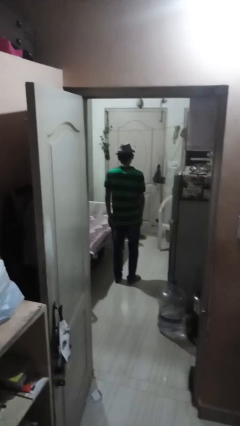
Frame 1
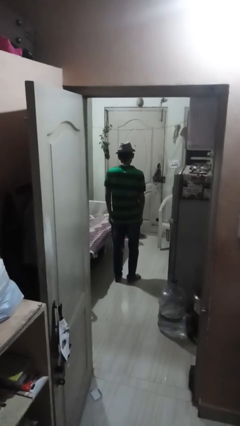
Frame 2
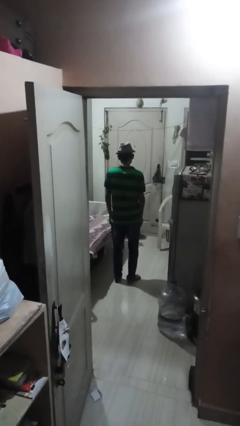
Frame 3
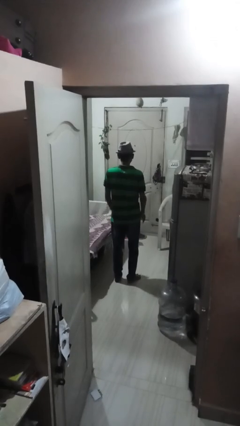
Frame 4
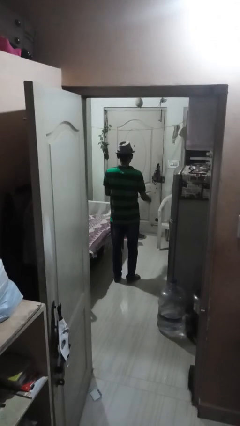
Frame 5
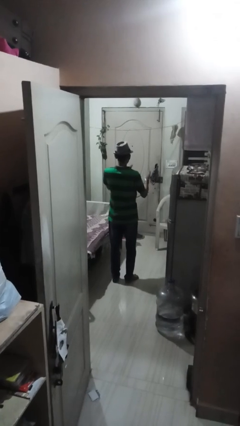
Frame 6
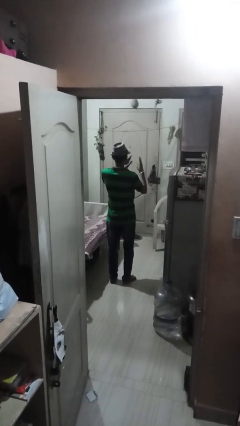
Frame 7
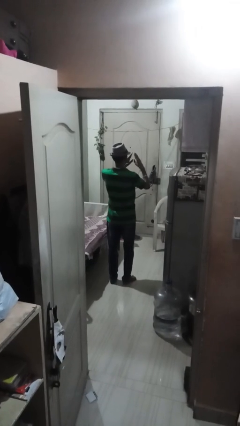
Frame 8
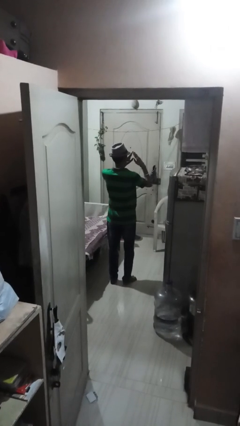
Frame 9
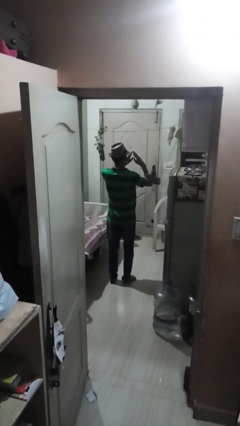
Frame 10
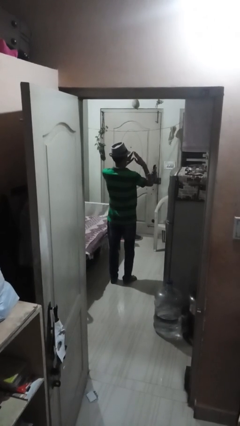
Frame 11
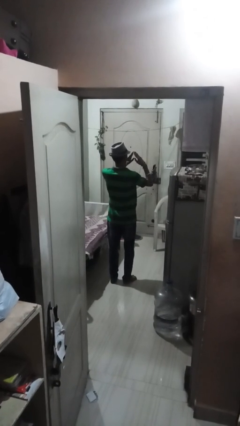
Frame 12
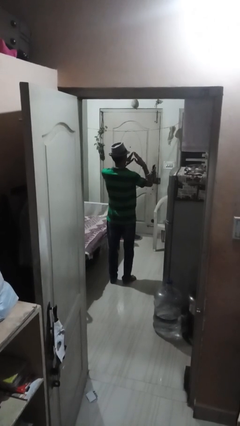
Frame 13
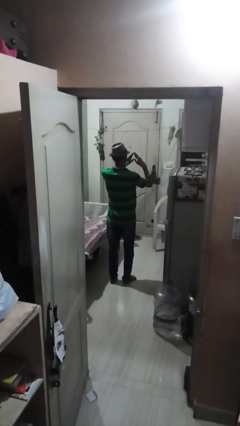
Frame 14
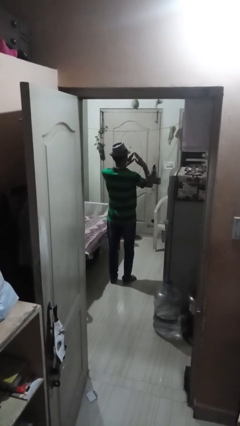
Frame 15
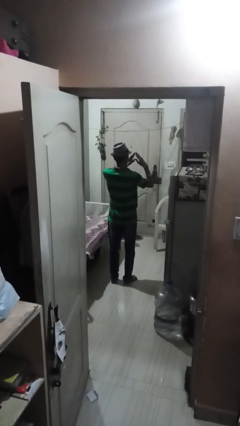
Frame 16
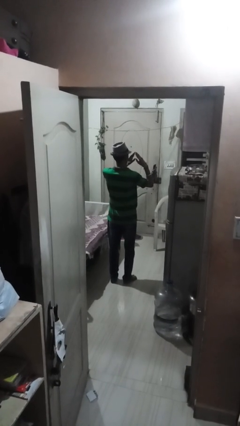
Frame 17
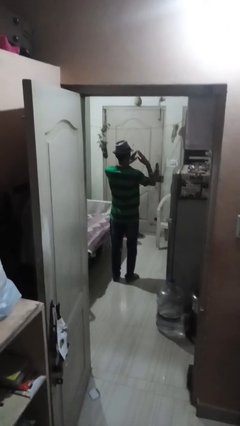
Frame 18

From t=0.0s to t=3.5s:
person gestures heart

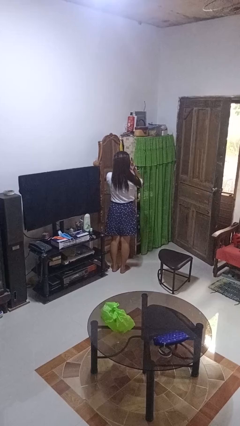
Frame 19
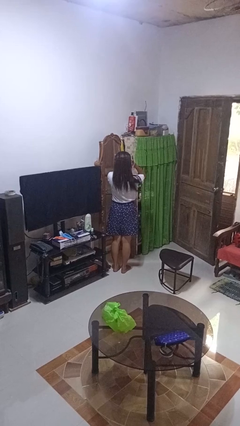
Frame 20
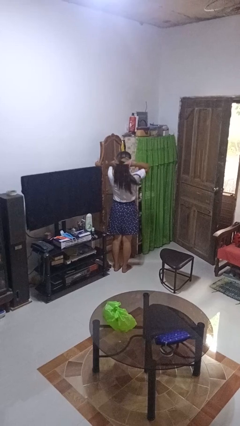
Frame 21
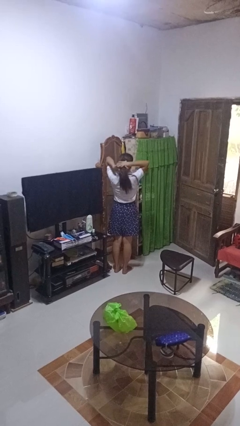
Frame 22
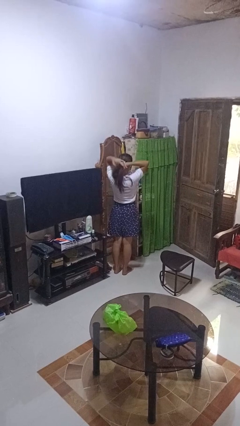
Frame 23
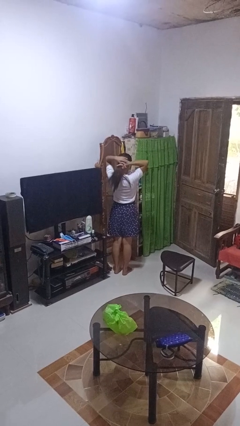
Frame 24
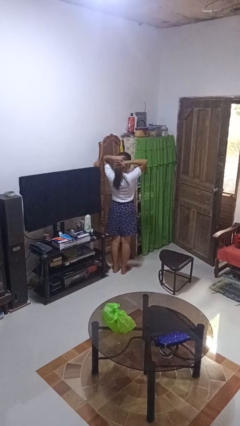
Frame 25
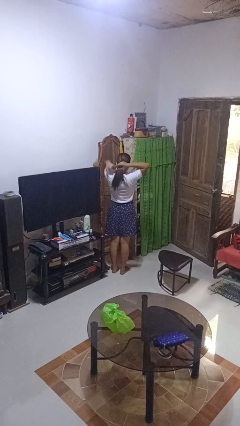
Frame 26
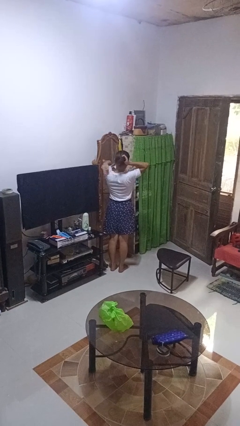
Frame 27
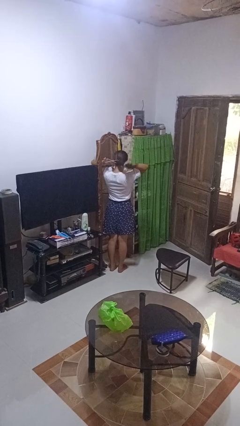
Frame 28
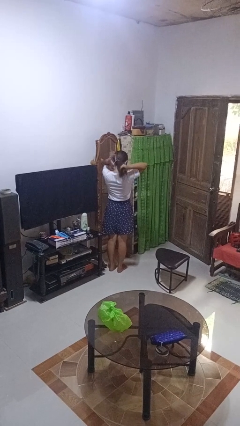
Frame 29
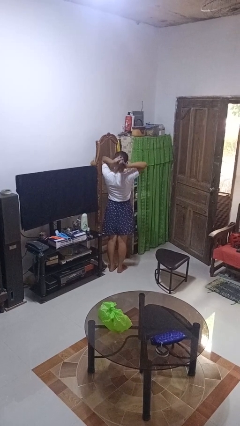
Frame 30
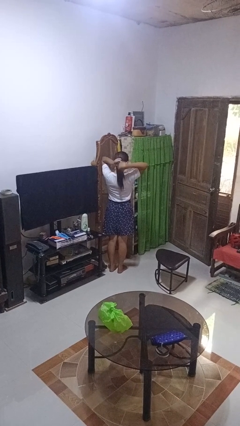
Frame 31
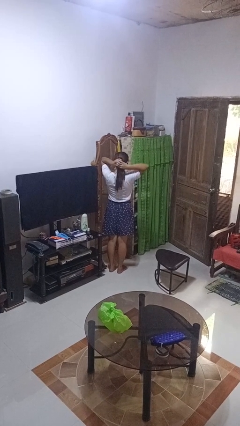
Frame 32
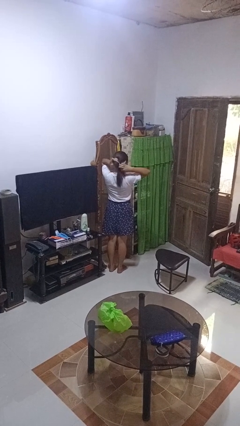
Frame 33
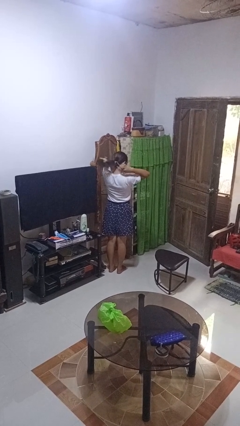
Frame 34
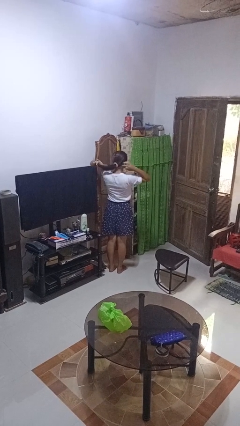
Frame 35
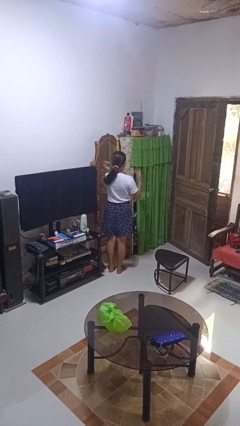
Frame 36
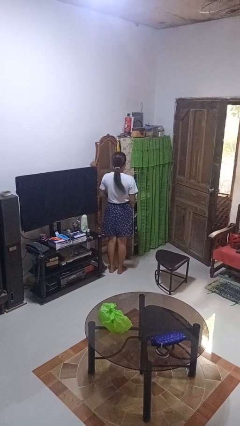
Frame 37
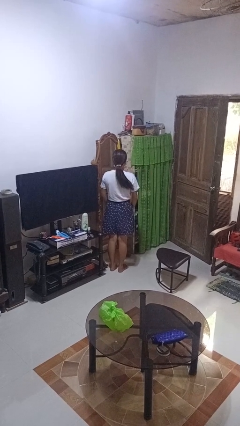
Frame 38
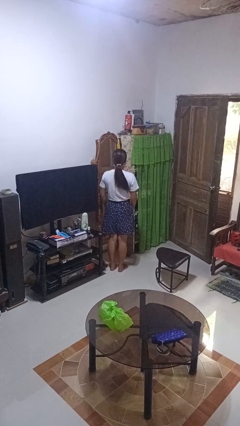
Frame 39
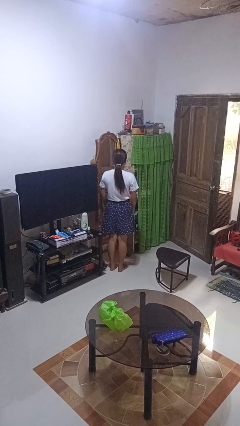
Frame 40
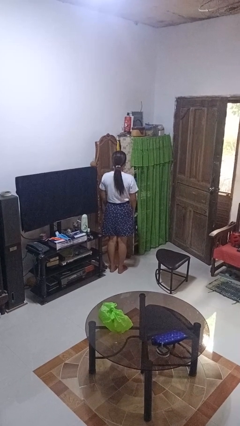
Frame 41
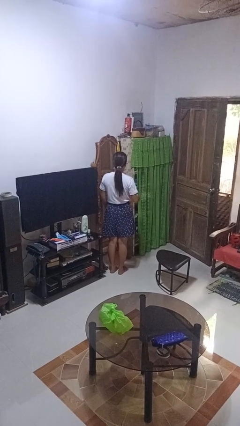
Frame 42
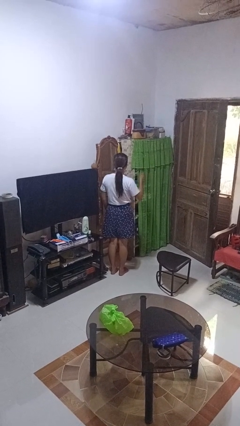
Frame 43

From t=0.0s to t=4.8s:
person puts hair in ponytail

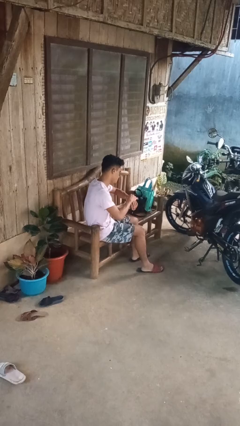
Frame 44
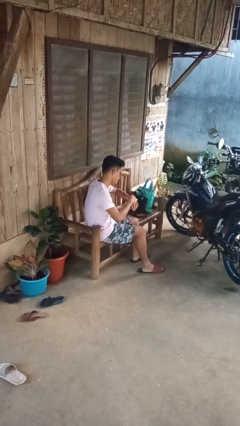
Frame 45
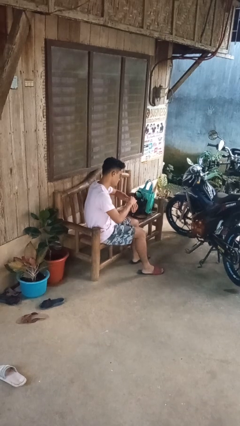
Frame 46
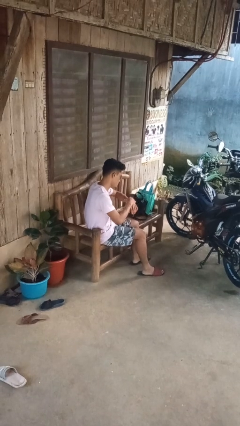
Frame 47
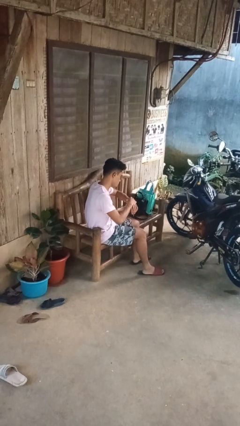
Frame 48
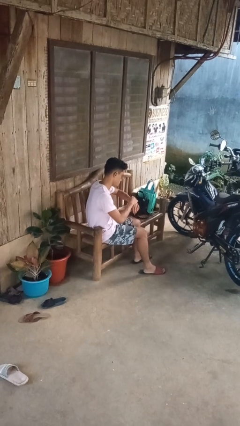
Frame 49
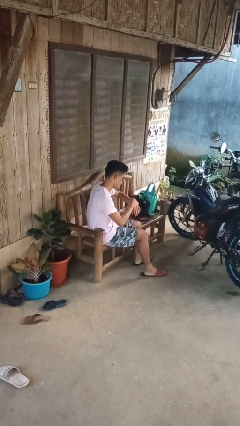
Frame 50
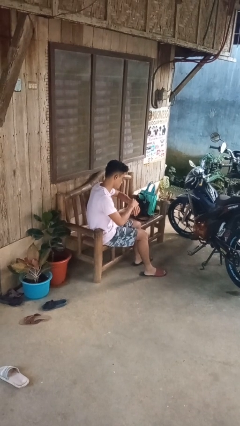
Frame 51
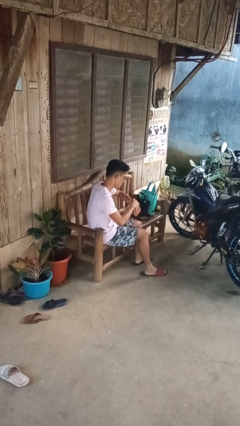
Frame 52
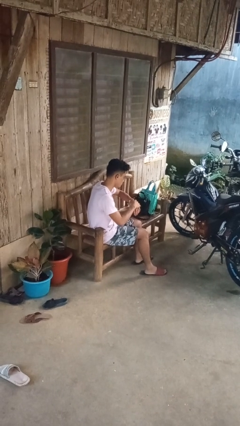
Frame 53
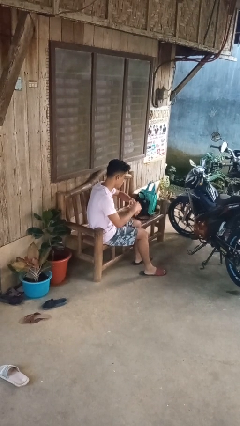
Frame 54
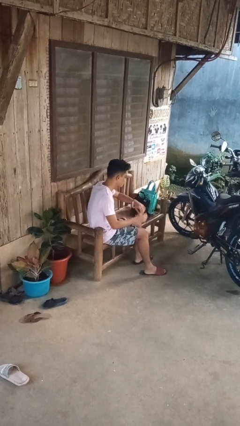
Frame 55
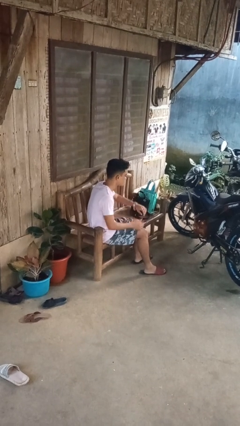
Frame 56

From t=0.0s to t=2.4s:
person looks at wristwatch

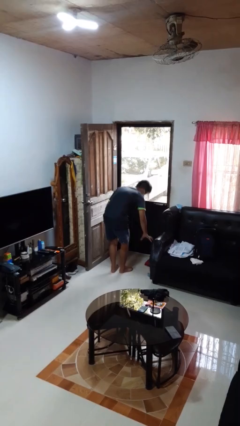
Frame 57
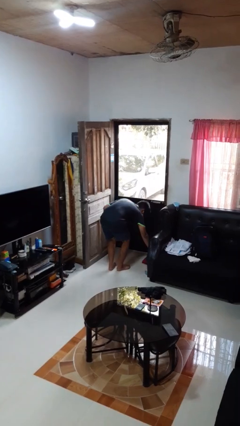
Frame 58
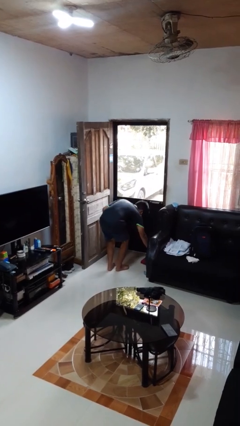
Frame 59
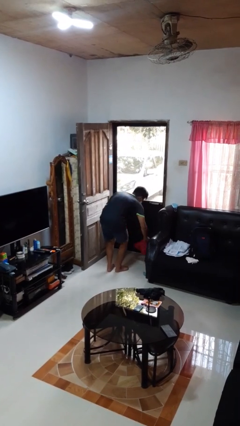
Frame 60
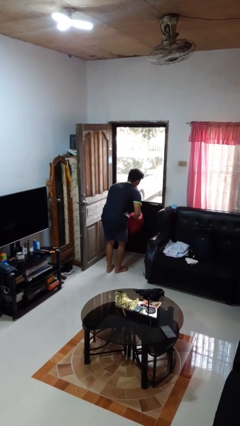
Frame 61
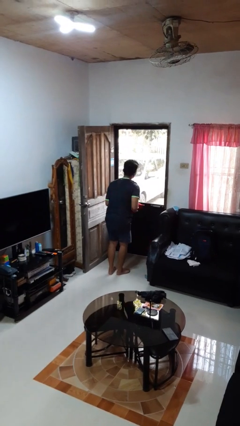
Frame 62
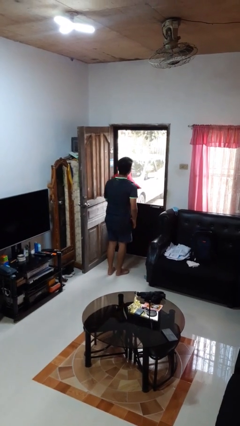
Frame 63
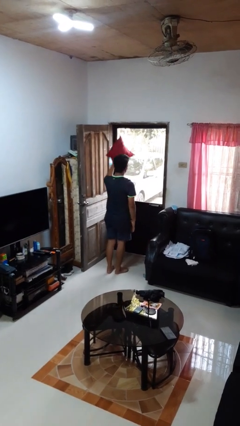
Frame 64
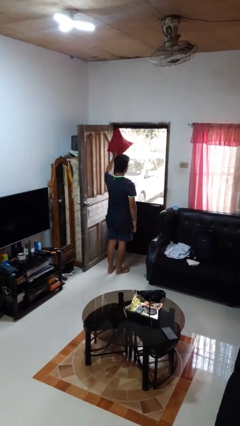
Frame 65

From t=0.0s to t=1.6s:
person picks up object from floor

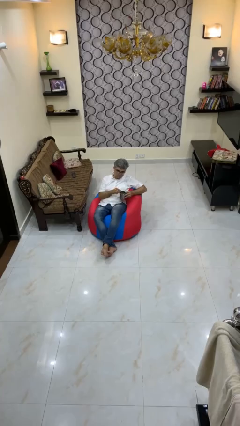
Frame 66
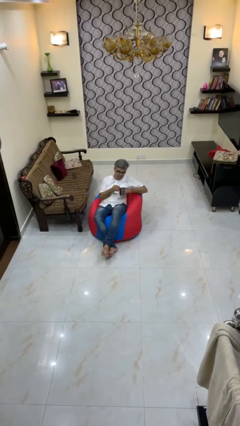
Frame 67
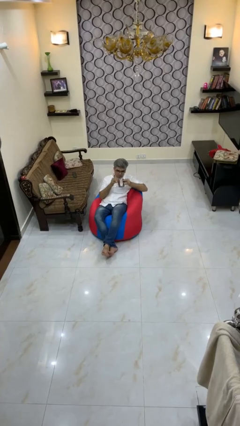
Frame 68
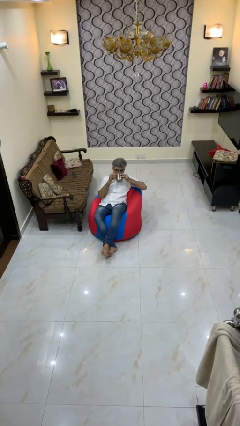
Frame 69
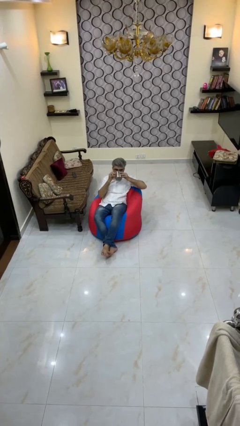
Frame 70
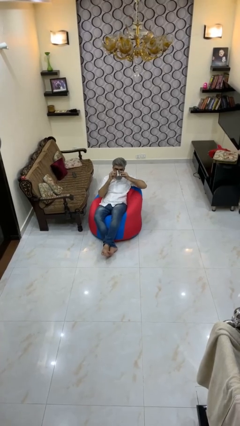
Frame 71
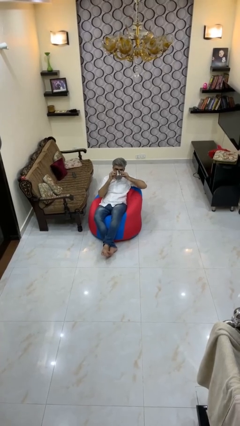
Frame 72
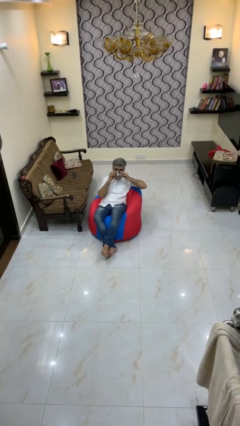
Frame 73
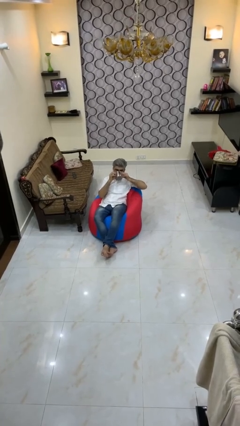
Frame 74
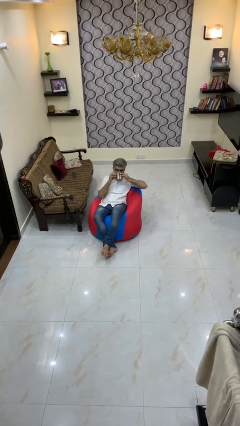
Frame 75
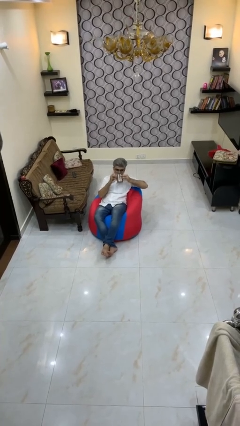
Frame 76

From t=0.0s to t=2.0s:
person drinks from mug

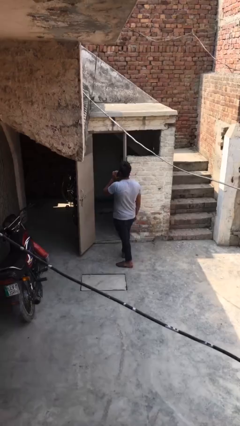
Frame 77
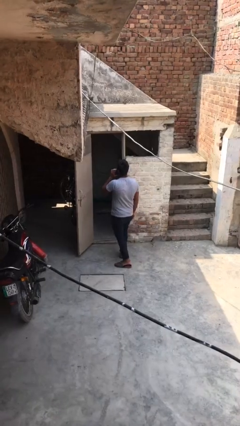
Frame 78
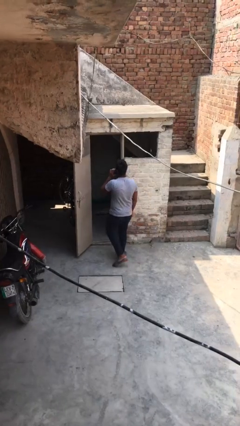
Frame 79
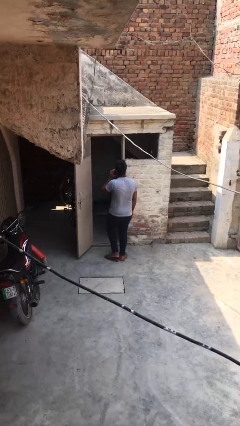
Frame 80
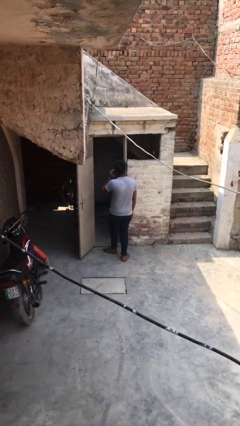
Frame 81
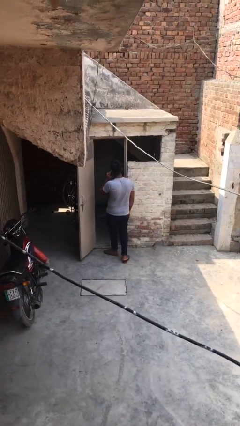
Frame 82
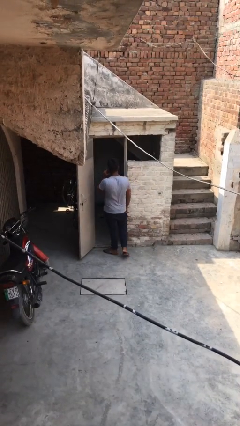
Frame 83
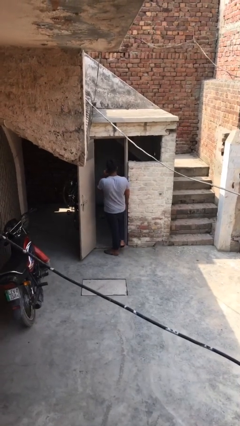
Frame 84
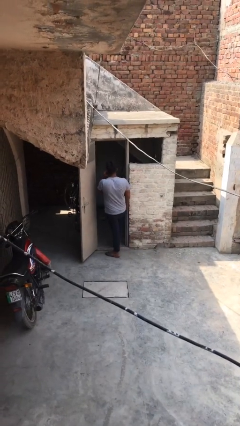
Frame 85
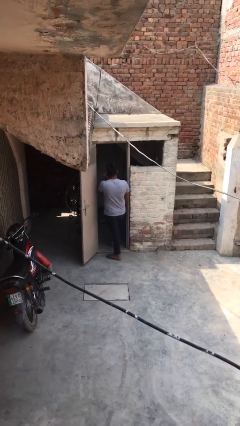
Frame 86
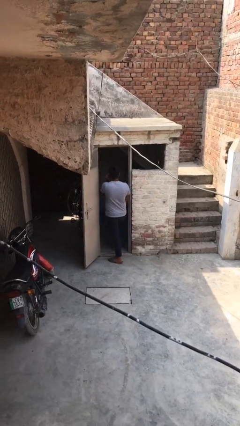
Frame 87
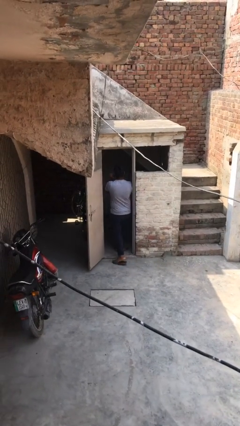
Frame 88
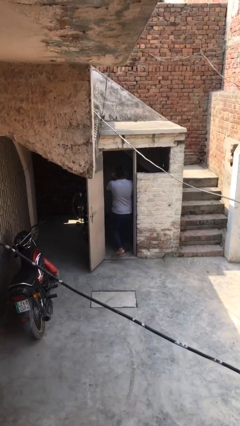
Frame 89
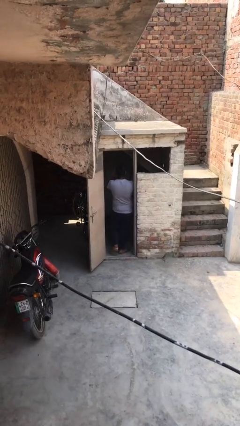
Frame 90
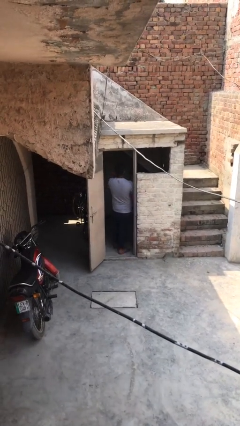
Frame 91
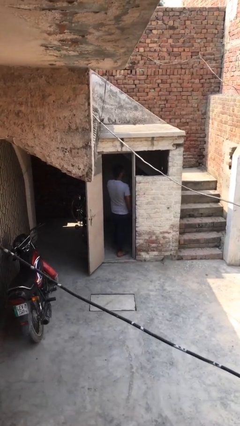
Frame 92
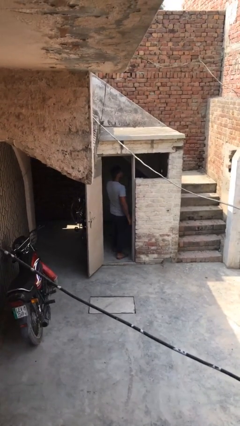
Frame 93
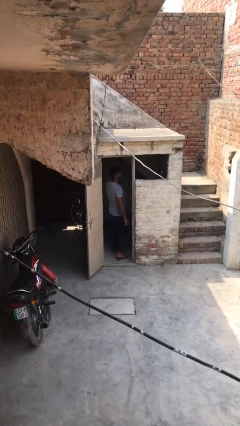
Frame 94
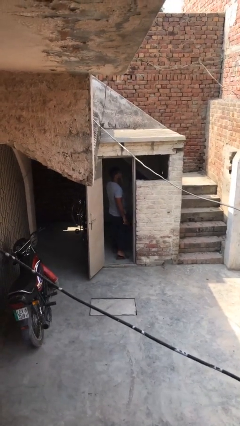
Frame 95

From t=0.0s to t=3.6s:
person exits scene through structure
